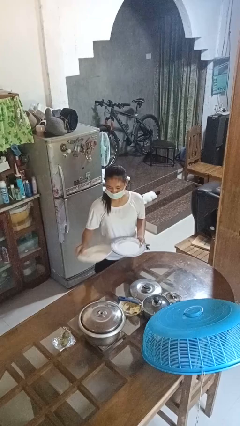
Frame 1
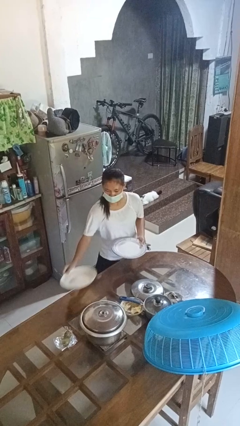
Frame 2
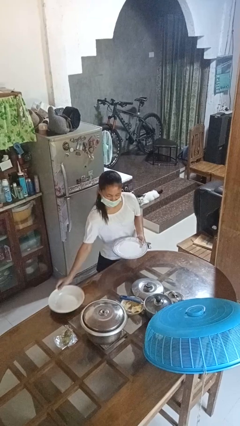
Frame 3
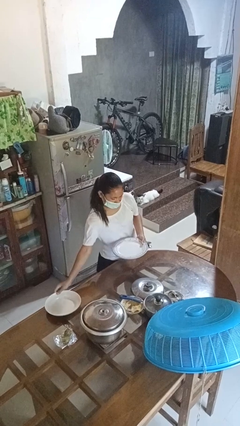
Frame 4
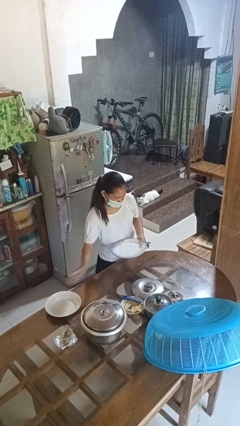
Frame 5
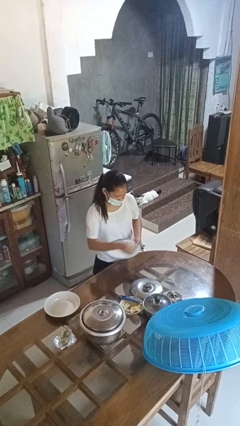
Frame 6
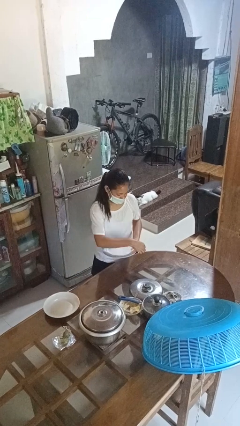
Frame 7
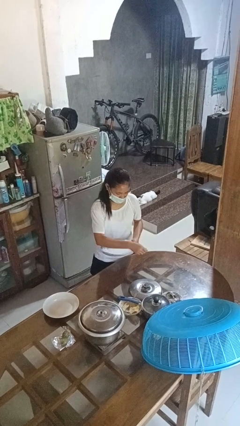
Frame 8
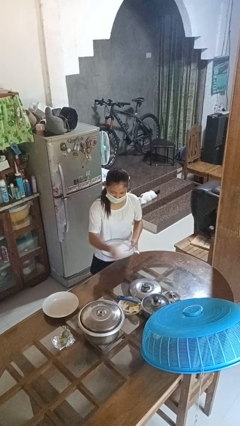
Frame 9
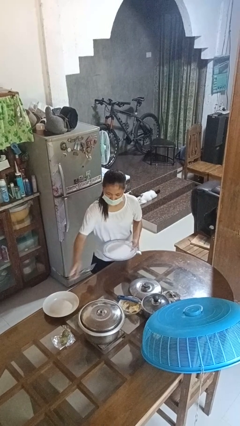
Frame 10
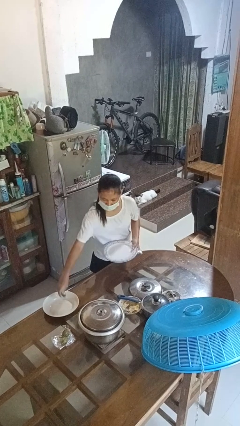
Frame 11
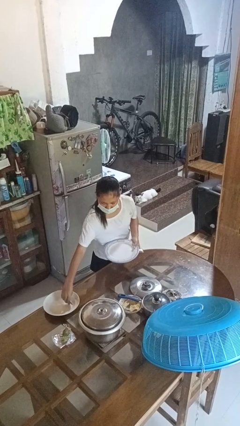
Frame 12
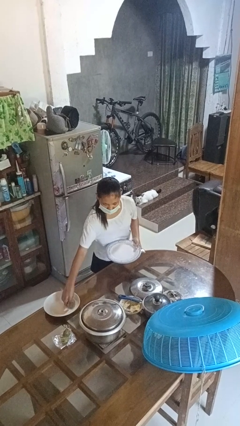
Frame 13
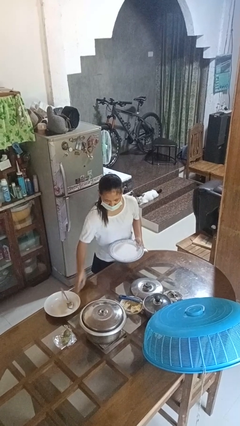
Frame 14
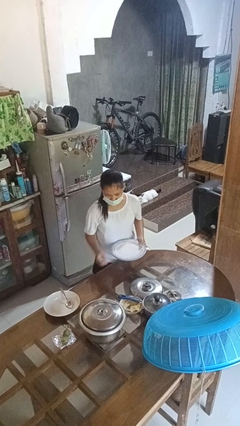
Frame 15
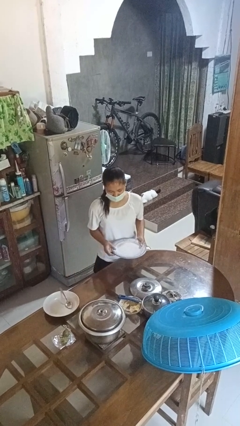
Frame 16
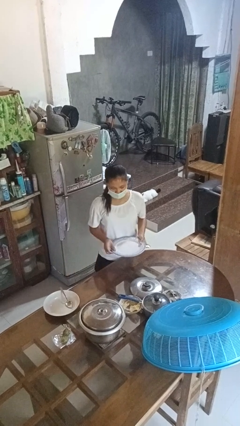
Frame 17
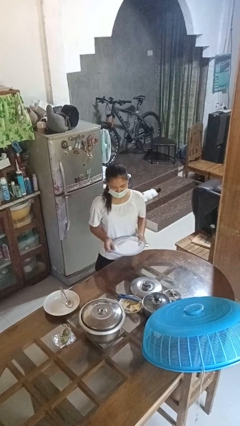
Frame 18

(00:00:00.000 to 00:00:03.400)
person sets table

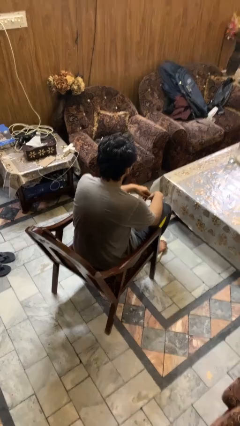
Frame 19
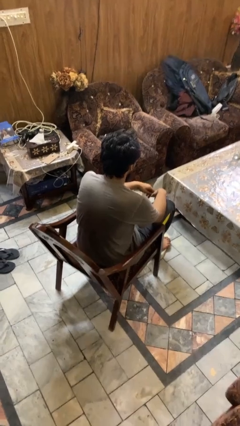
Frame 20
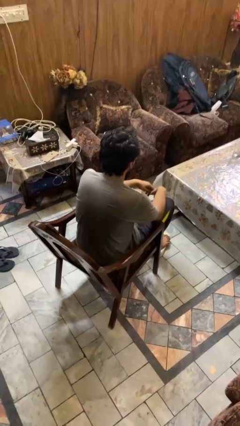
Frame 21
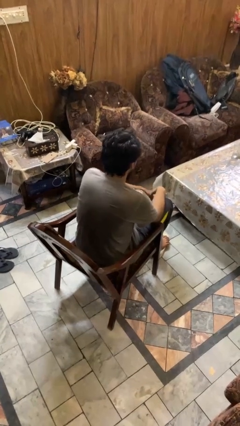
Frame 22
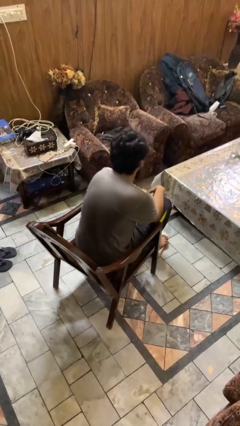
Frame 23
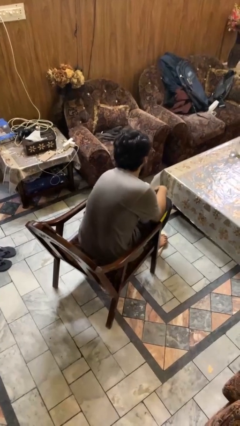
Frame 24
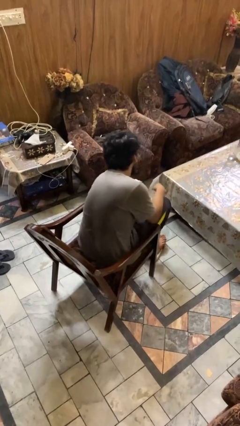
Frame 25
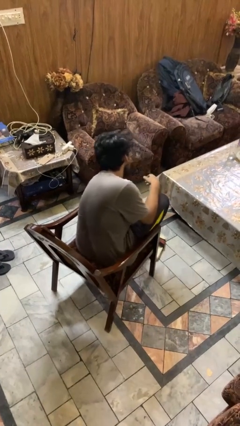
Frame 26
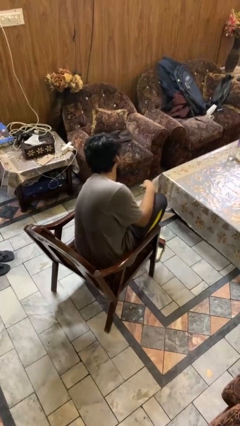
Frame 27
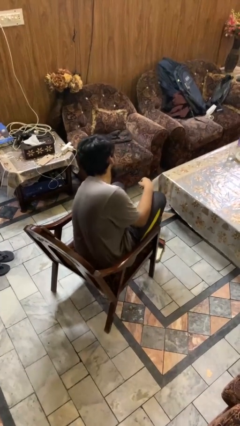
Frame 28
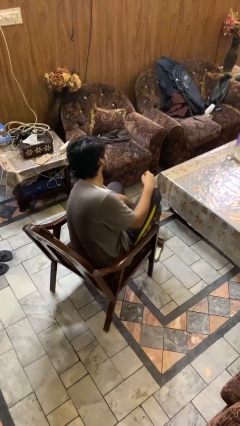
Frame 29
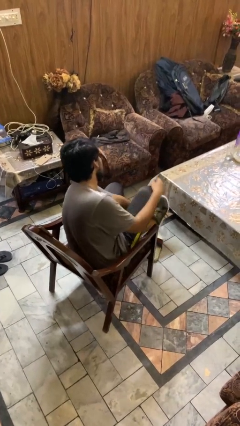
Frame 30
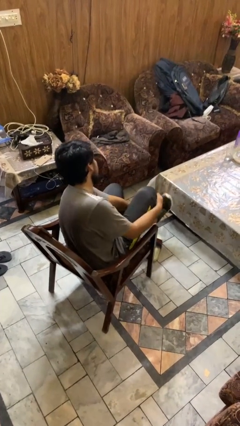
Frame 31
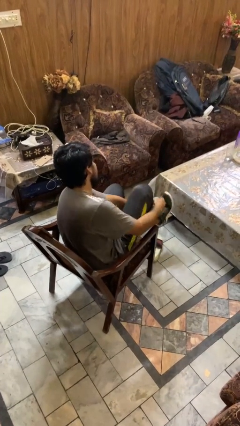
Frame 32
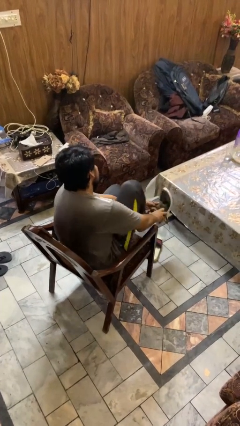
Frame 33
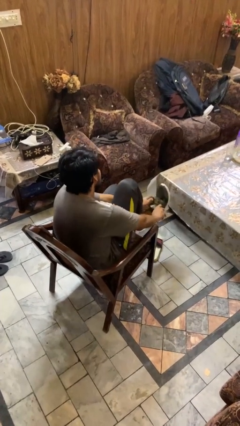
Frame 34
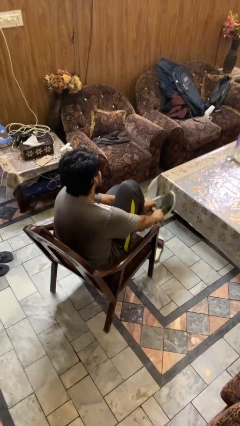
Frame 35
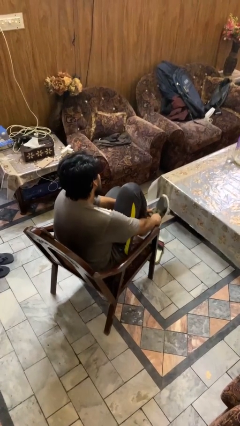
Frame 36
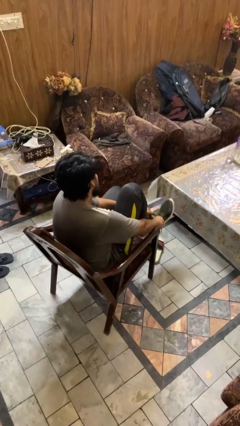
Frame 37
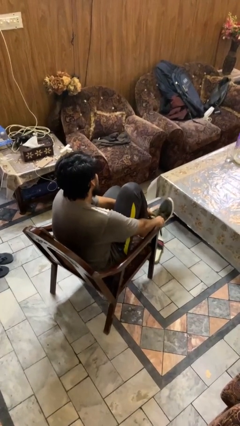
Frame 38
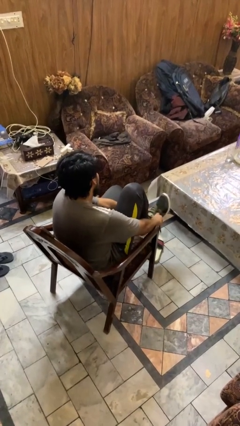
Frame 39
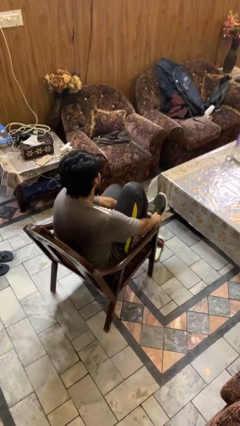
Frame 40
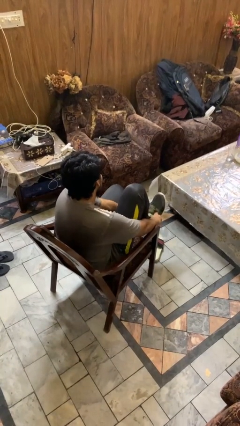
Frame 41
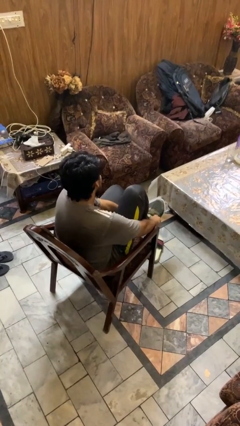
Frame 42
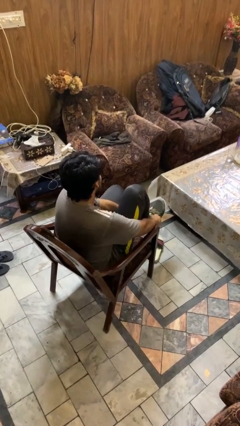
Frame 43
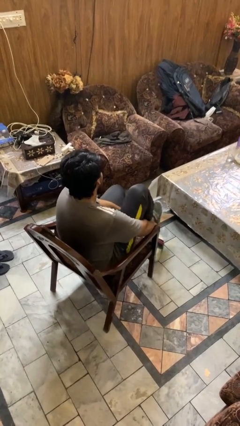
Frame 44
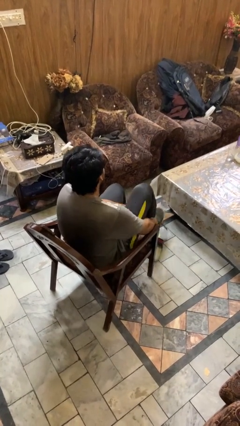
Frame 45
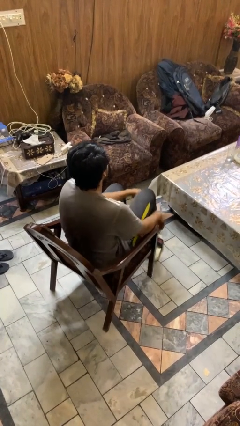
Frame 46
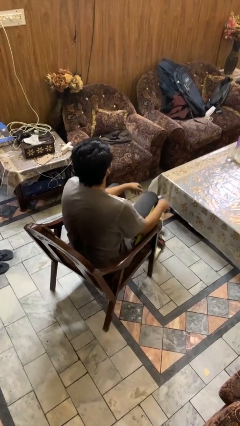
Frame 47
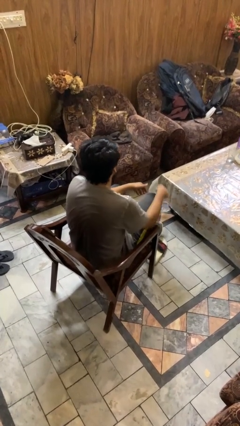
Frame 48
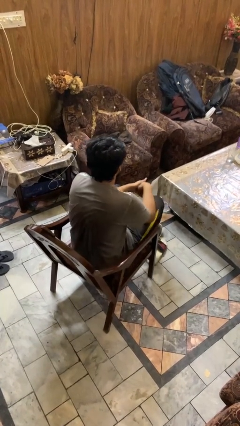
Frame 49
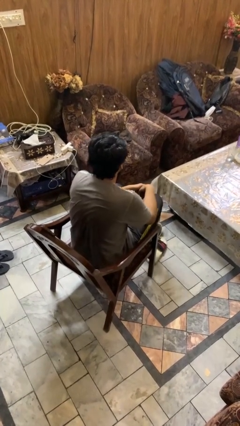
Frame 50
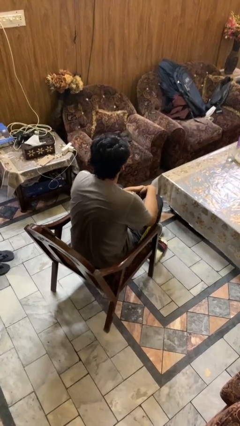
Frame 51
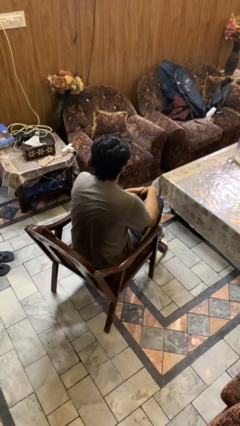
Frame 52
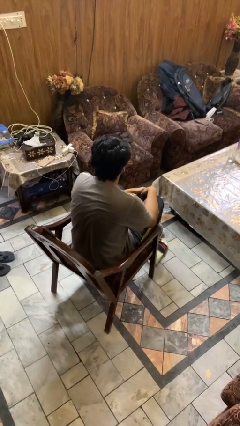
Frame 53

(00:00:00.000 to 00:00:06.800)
person puts on shoes

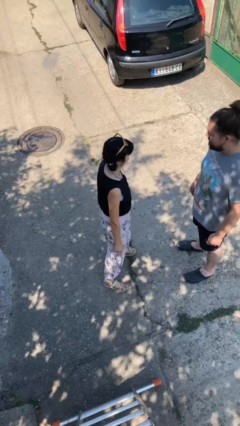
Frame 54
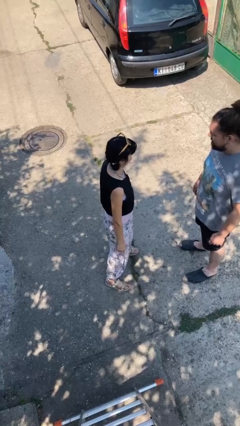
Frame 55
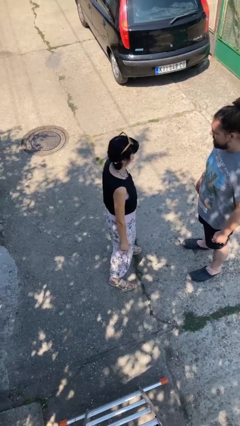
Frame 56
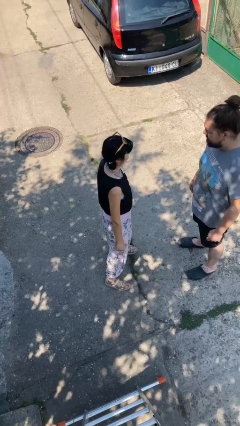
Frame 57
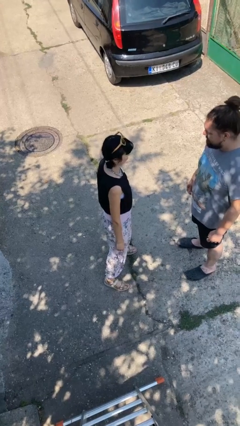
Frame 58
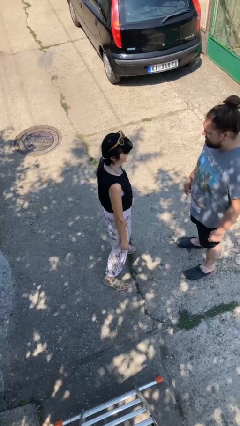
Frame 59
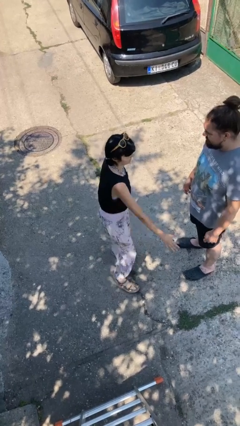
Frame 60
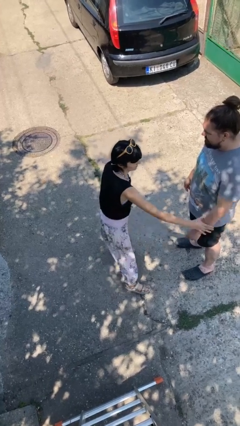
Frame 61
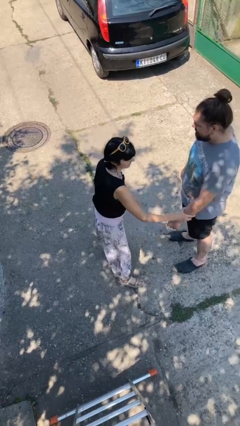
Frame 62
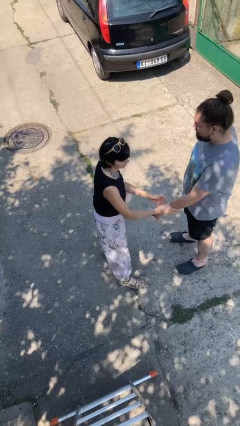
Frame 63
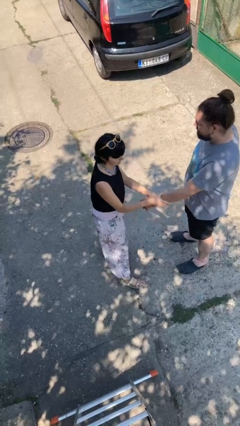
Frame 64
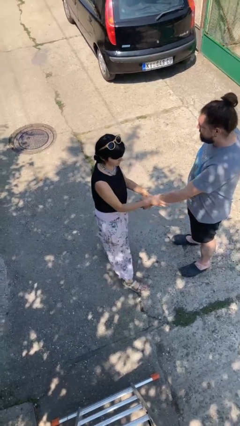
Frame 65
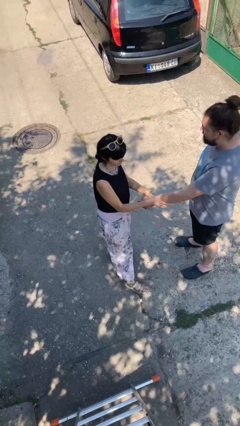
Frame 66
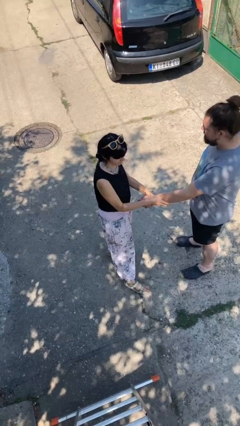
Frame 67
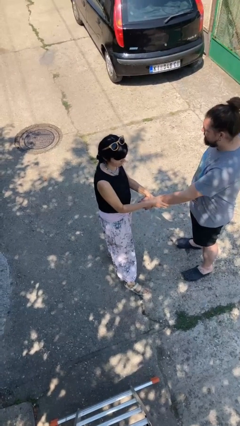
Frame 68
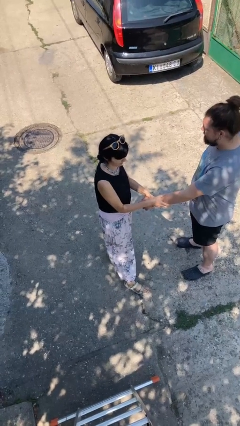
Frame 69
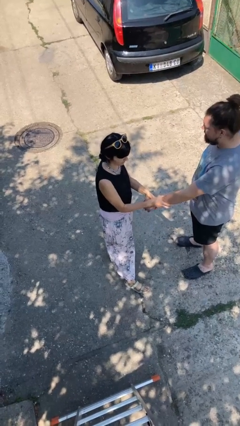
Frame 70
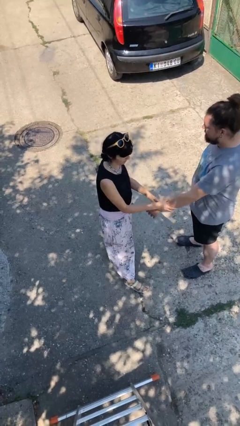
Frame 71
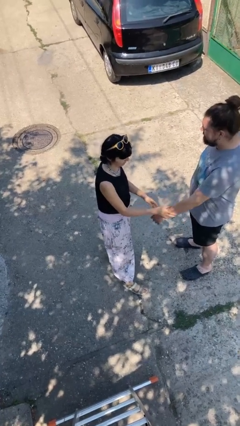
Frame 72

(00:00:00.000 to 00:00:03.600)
person grabs person by forearm

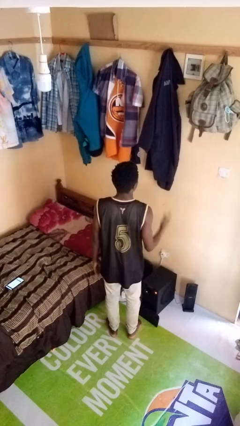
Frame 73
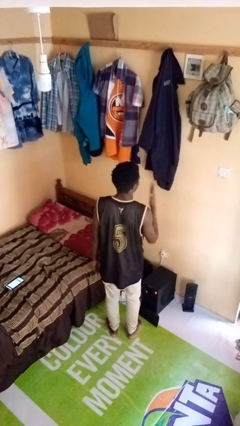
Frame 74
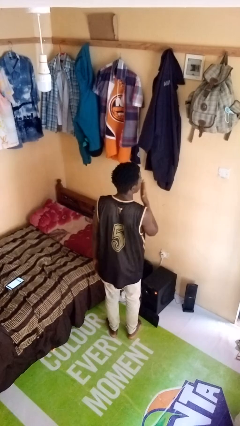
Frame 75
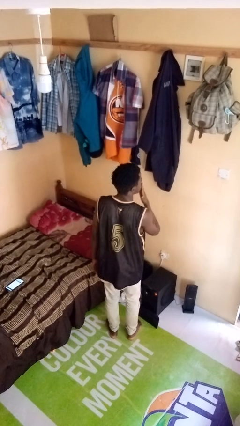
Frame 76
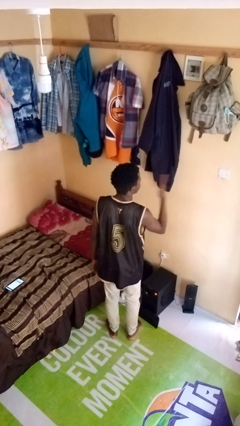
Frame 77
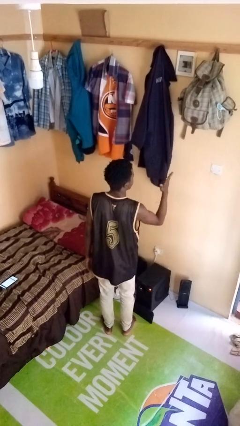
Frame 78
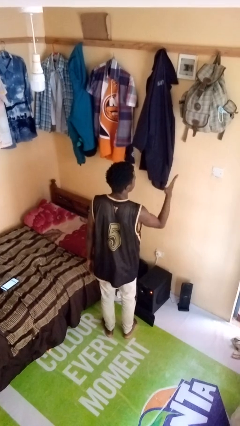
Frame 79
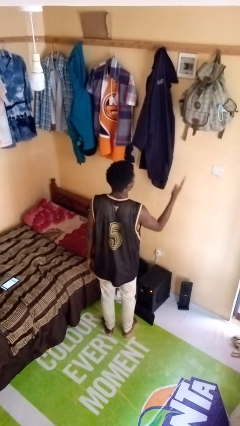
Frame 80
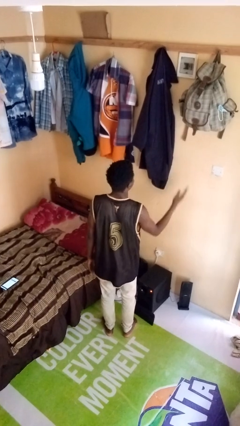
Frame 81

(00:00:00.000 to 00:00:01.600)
person gestures blow kiss

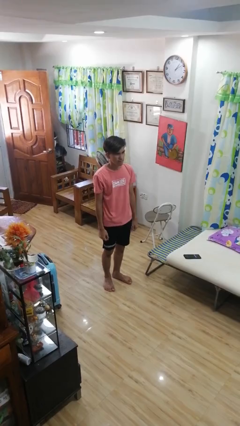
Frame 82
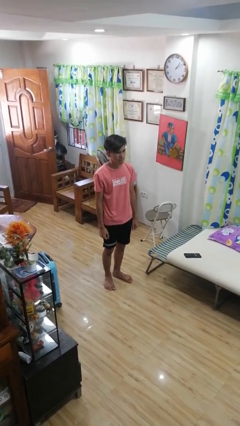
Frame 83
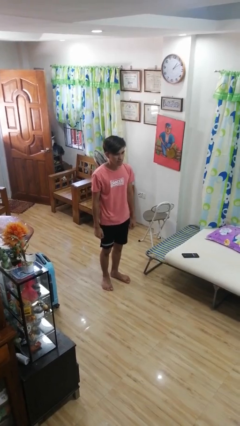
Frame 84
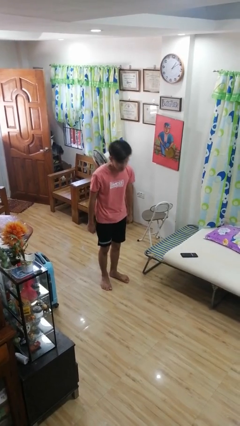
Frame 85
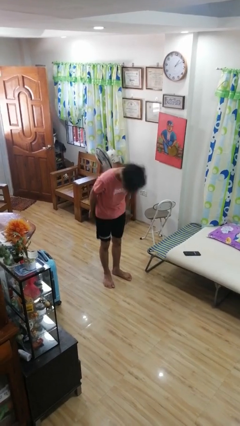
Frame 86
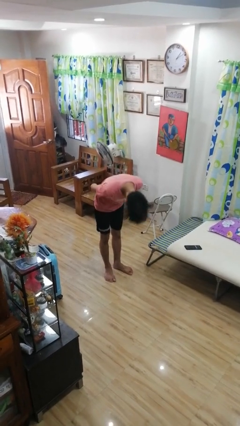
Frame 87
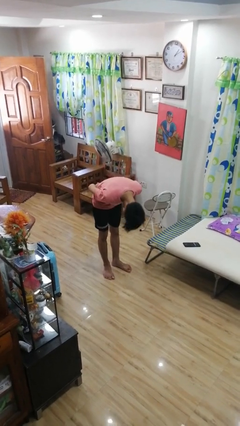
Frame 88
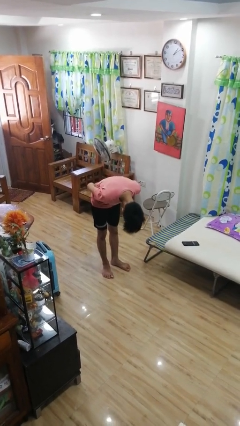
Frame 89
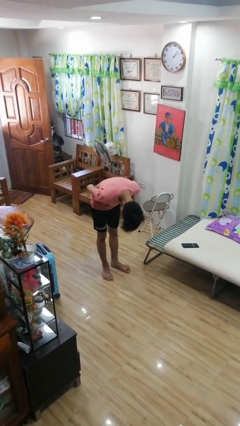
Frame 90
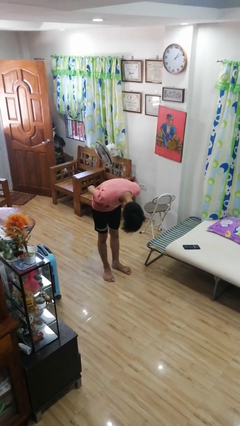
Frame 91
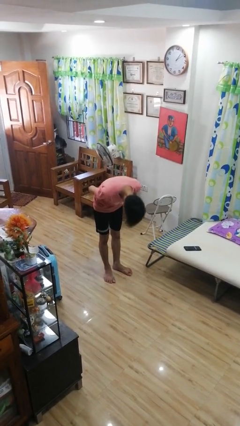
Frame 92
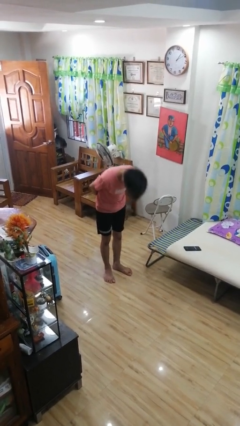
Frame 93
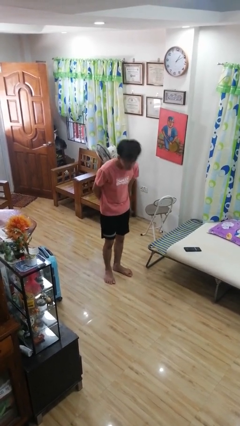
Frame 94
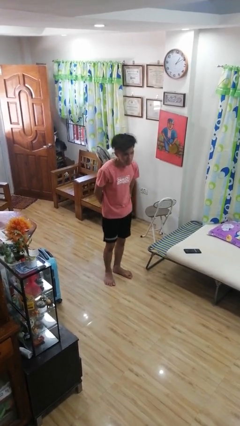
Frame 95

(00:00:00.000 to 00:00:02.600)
person bows
